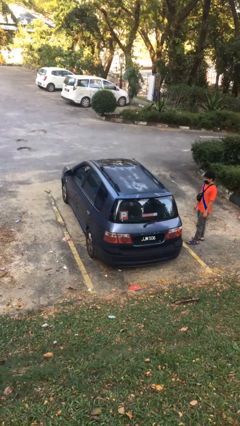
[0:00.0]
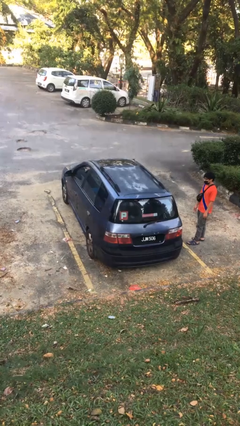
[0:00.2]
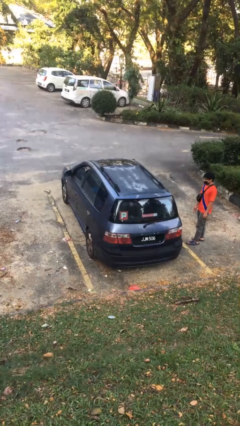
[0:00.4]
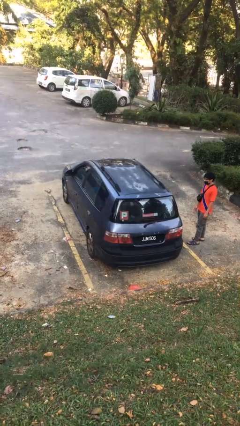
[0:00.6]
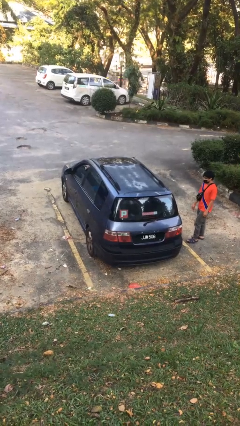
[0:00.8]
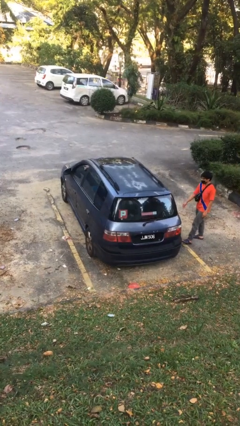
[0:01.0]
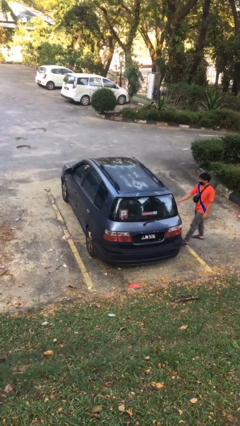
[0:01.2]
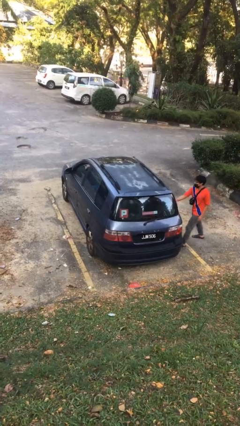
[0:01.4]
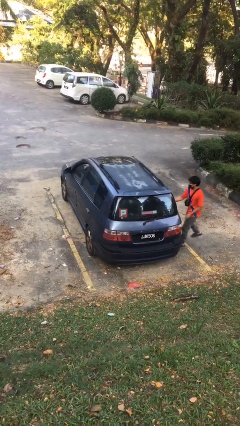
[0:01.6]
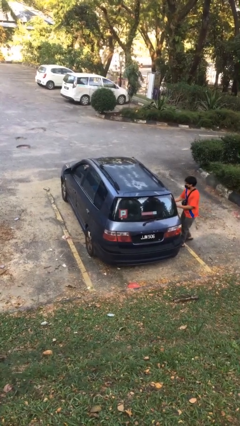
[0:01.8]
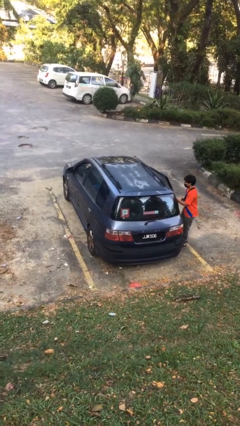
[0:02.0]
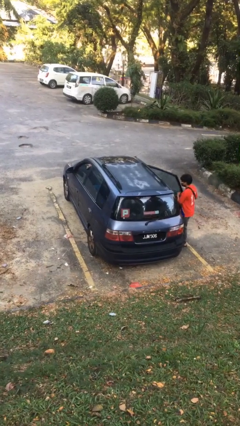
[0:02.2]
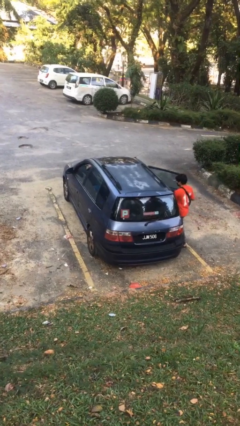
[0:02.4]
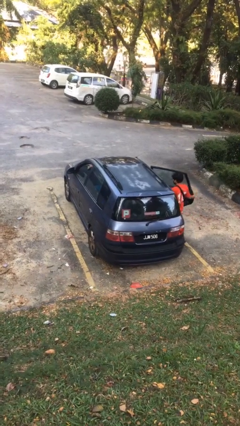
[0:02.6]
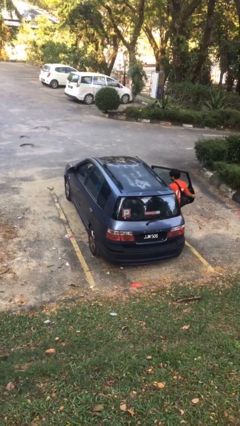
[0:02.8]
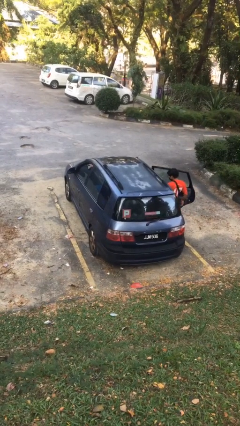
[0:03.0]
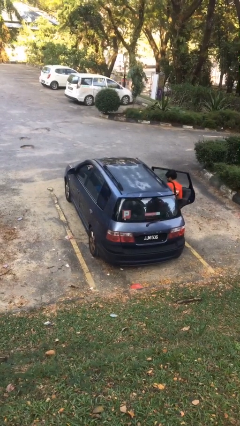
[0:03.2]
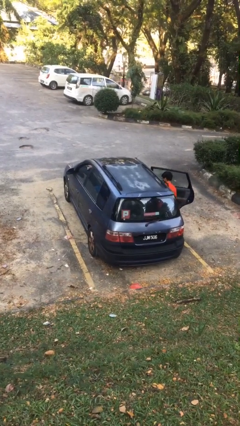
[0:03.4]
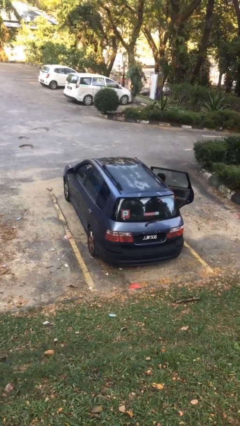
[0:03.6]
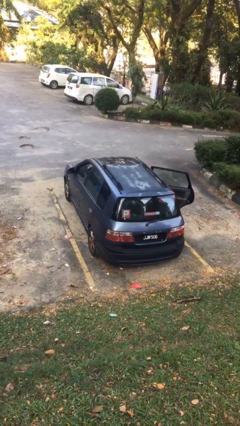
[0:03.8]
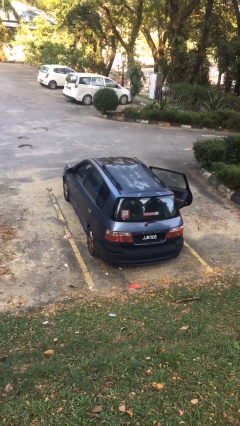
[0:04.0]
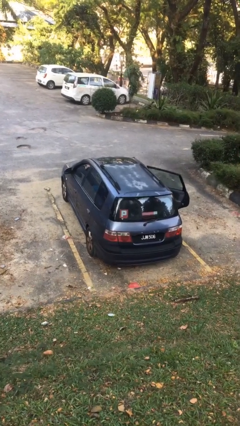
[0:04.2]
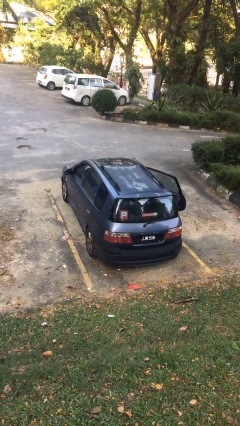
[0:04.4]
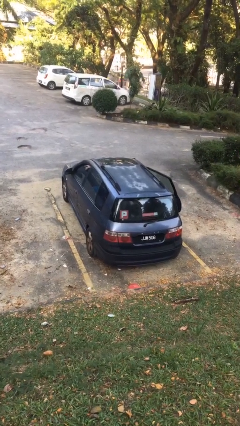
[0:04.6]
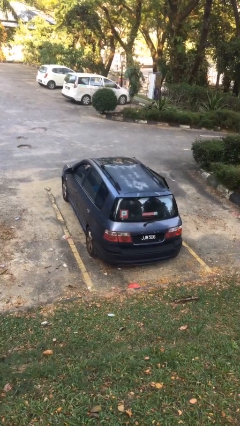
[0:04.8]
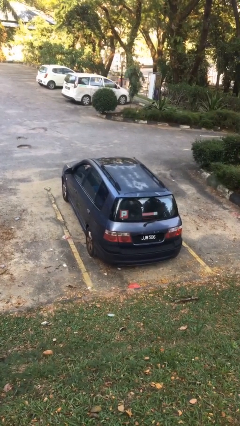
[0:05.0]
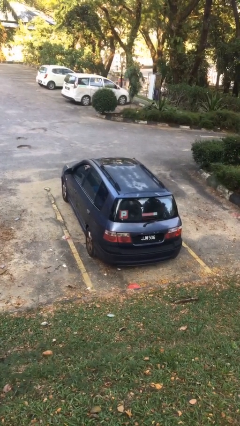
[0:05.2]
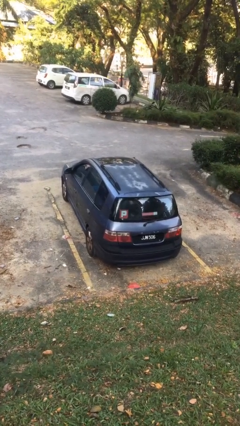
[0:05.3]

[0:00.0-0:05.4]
car picks up person

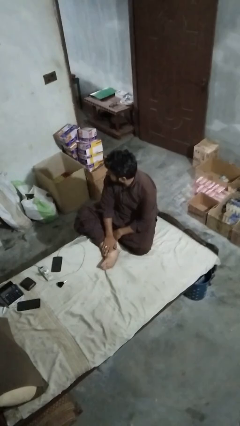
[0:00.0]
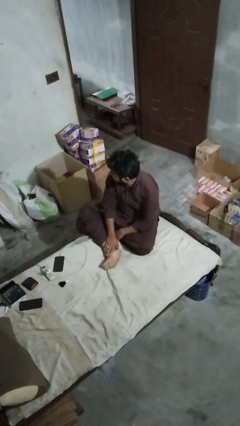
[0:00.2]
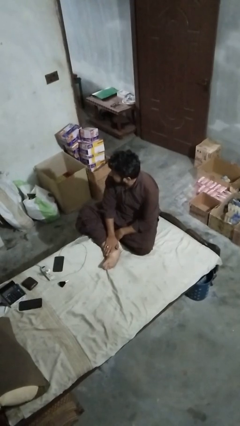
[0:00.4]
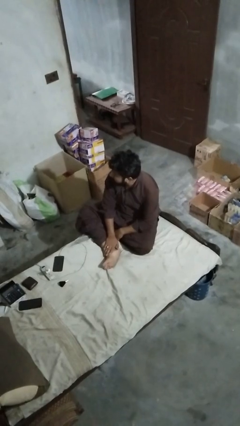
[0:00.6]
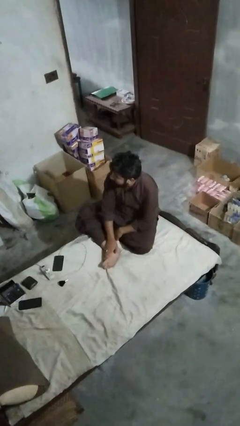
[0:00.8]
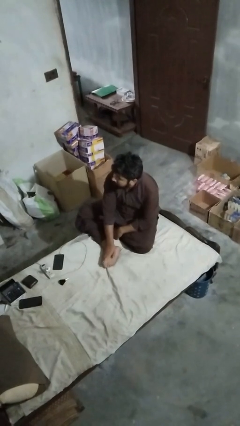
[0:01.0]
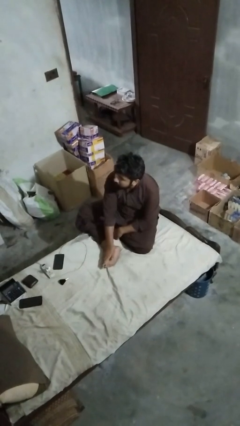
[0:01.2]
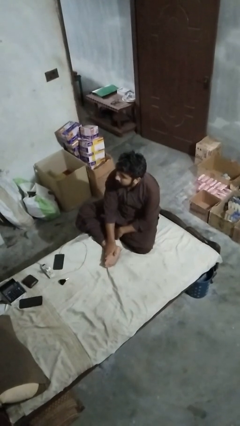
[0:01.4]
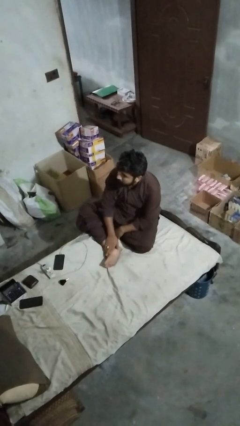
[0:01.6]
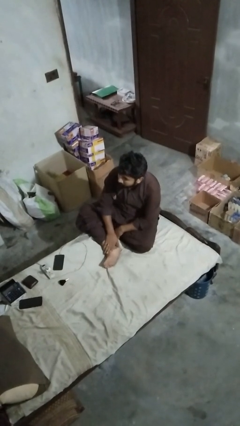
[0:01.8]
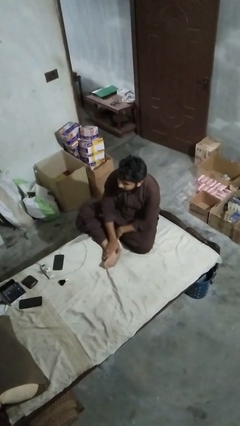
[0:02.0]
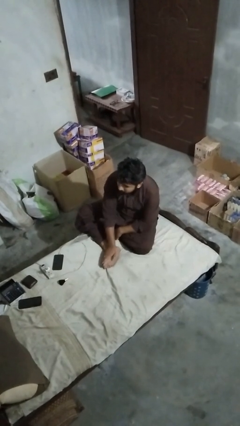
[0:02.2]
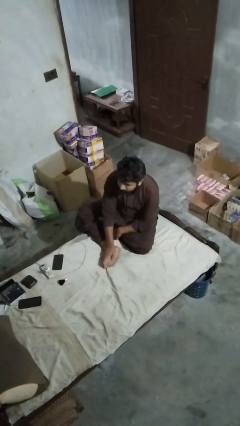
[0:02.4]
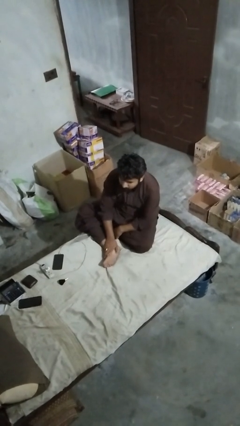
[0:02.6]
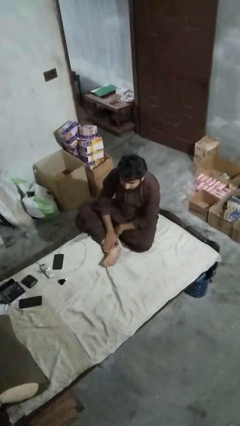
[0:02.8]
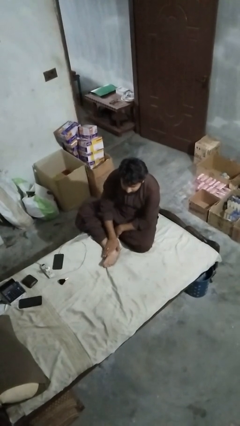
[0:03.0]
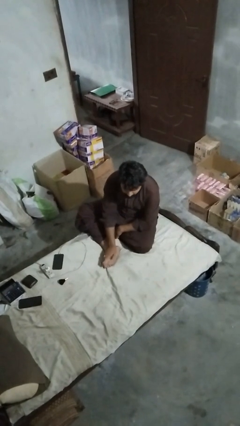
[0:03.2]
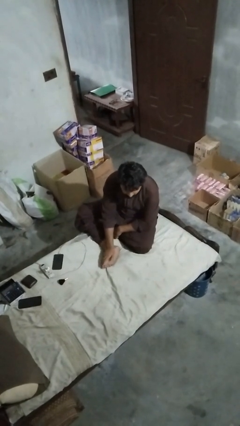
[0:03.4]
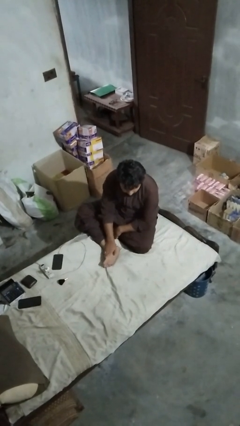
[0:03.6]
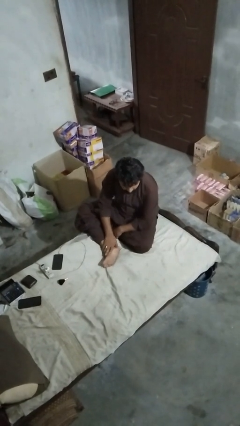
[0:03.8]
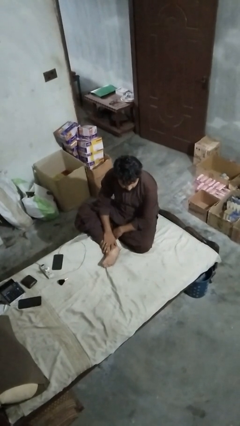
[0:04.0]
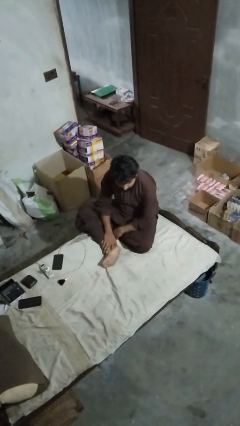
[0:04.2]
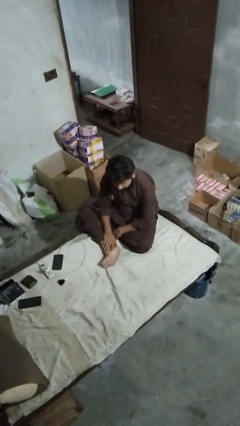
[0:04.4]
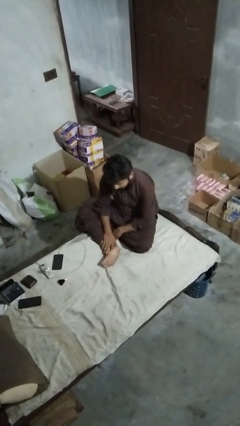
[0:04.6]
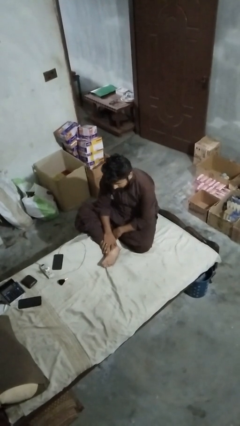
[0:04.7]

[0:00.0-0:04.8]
person rubs foot

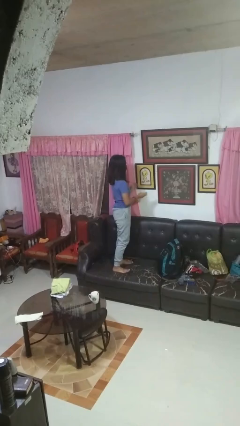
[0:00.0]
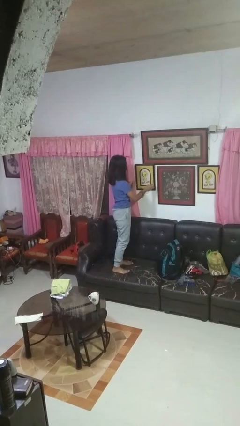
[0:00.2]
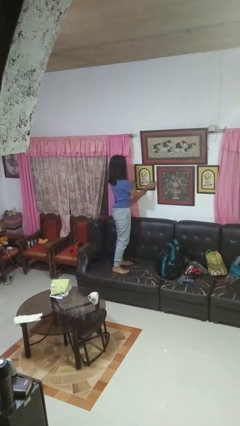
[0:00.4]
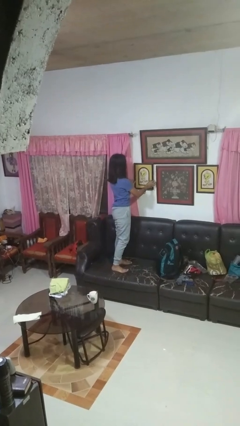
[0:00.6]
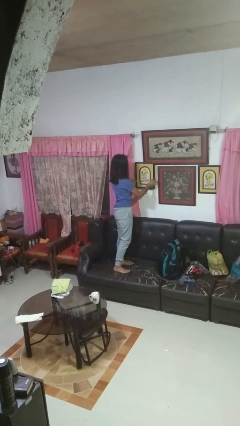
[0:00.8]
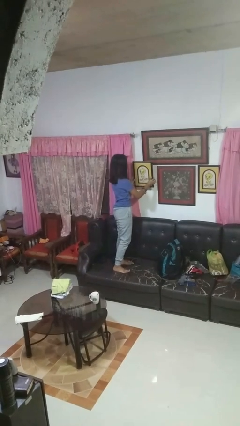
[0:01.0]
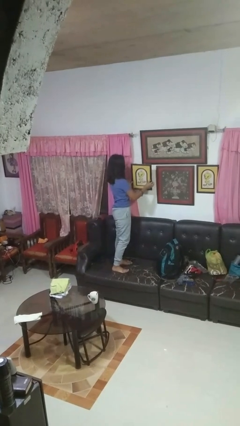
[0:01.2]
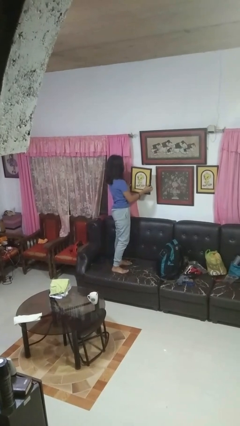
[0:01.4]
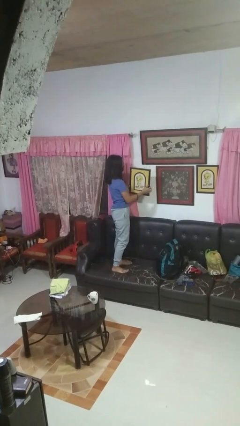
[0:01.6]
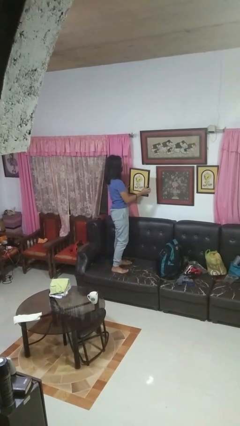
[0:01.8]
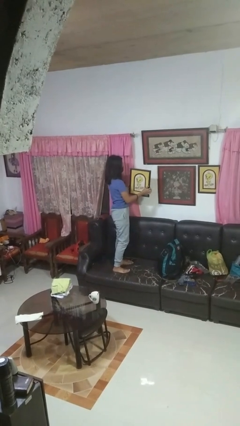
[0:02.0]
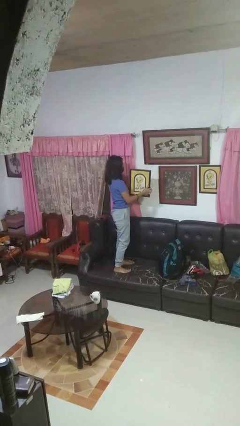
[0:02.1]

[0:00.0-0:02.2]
person takes down picture frame

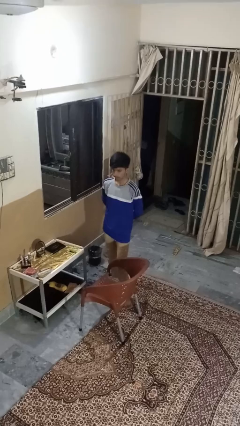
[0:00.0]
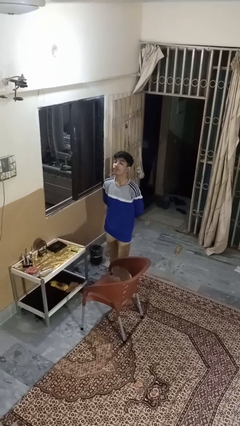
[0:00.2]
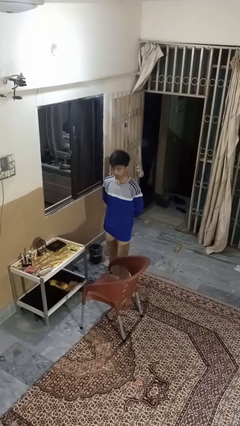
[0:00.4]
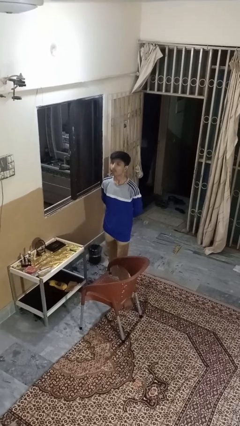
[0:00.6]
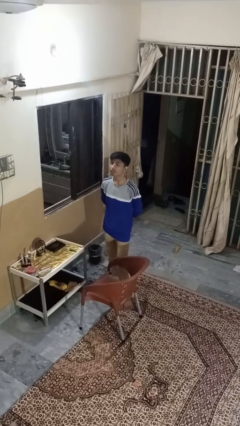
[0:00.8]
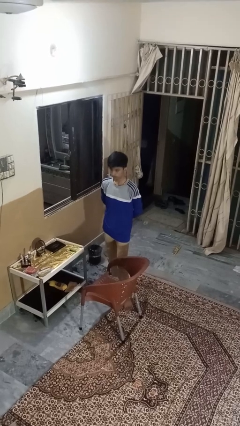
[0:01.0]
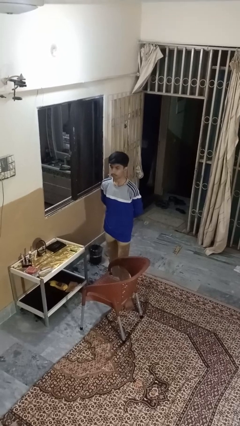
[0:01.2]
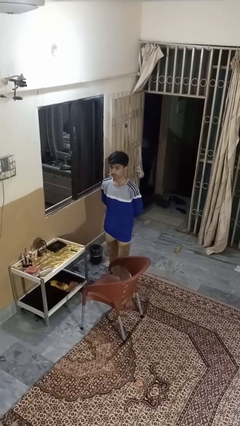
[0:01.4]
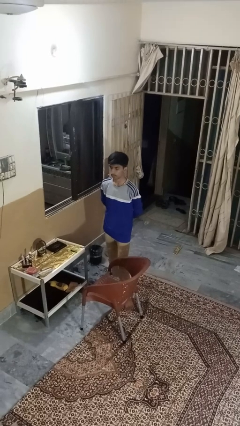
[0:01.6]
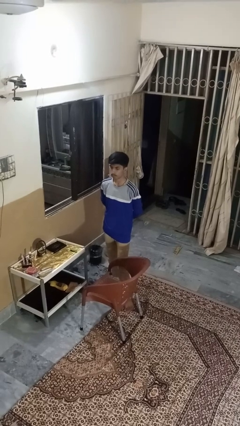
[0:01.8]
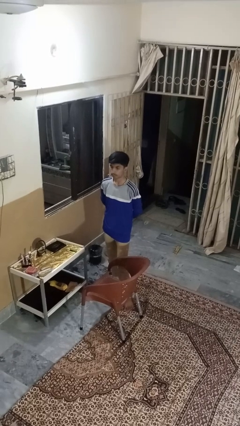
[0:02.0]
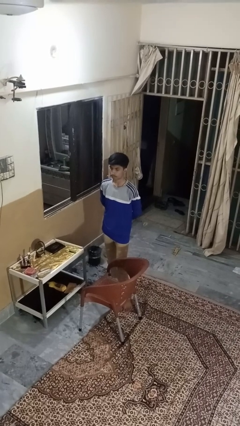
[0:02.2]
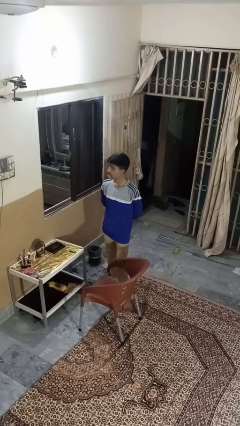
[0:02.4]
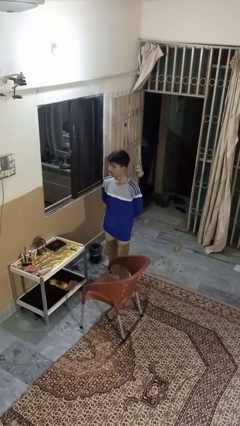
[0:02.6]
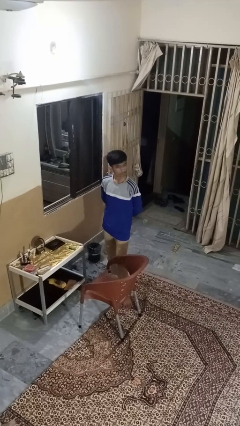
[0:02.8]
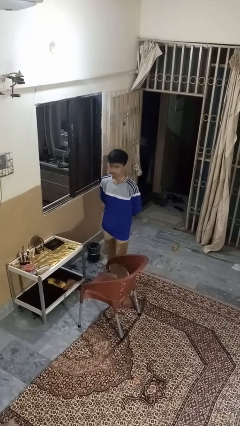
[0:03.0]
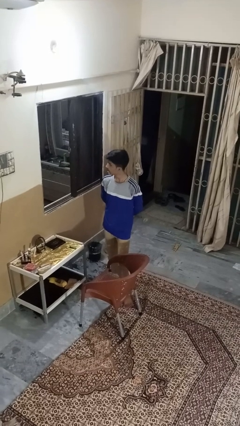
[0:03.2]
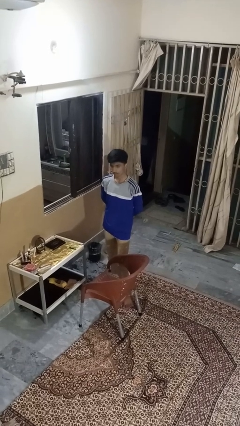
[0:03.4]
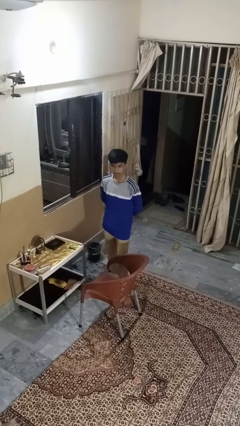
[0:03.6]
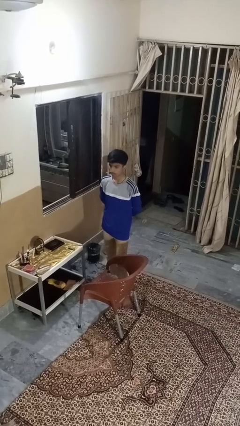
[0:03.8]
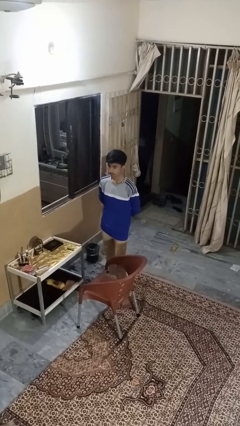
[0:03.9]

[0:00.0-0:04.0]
person nods head

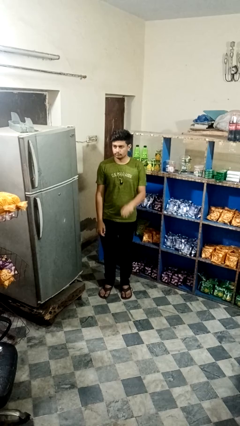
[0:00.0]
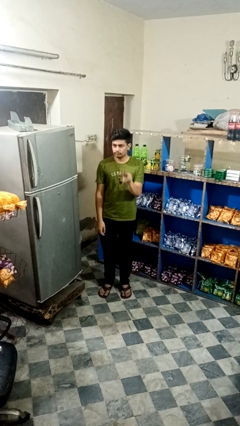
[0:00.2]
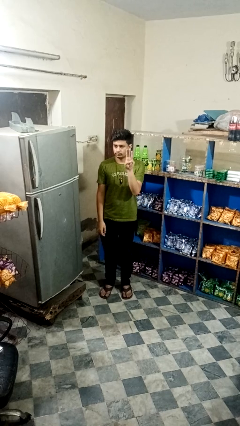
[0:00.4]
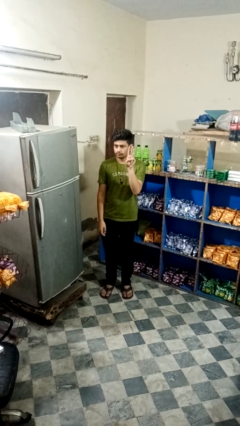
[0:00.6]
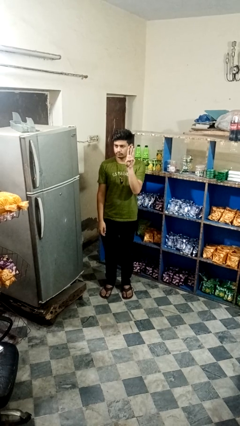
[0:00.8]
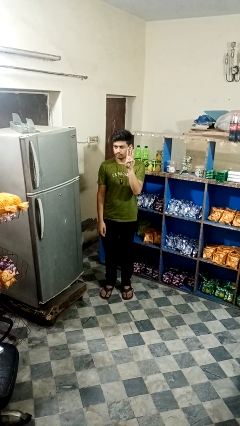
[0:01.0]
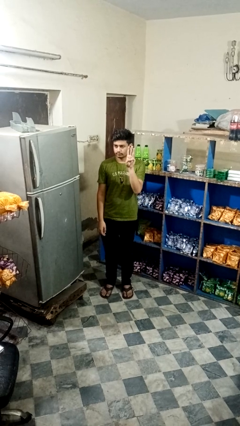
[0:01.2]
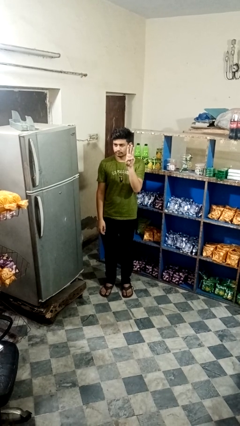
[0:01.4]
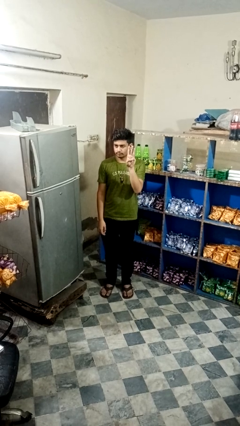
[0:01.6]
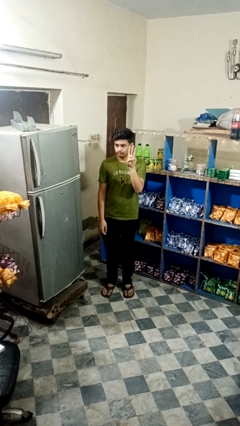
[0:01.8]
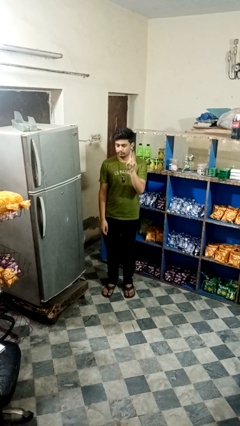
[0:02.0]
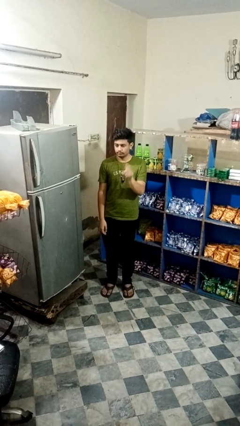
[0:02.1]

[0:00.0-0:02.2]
person gestures number three
